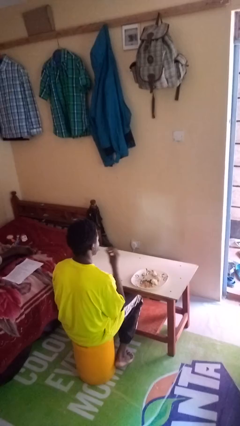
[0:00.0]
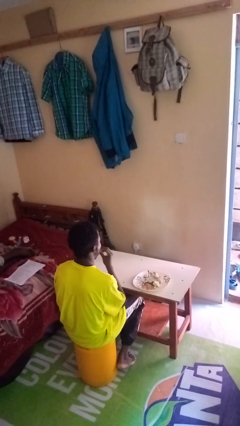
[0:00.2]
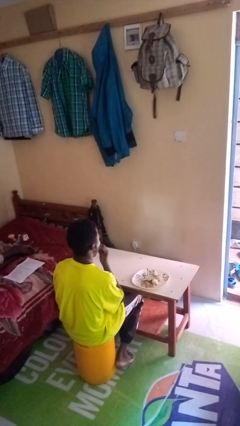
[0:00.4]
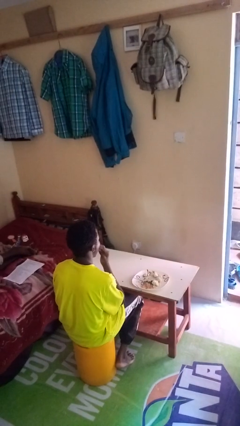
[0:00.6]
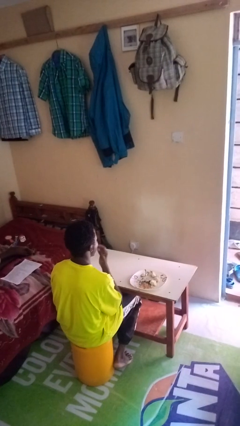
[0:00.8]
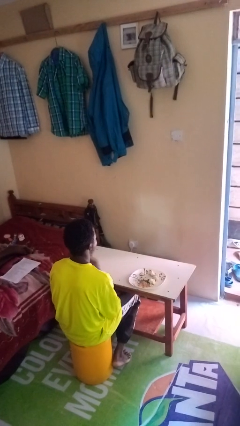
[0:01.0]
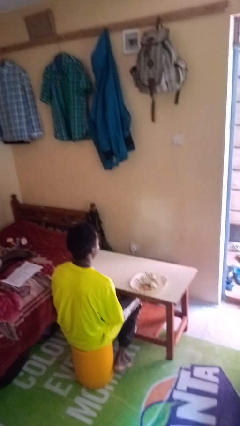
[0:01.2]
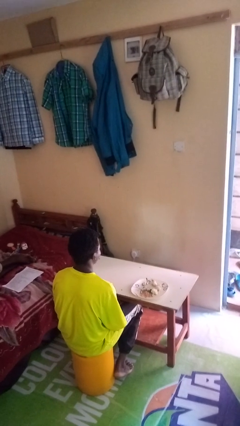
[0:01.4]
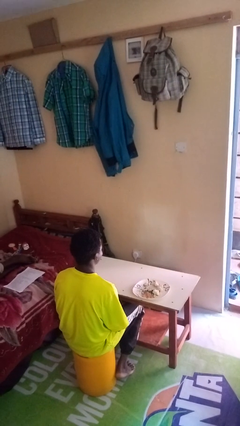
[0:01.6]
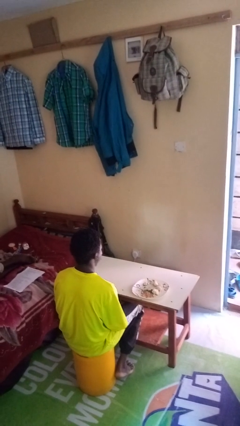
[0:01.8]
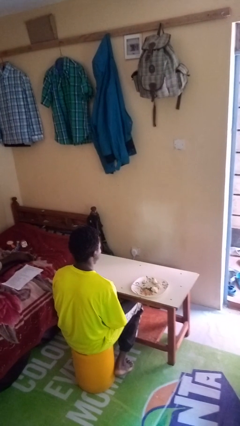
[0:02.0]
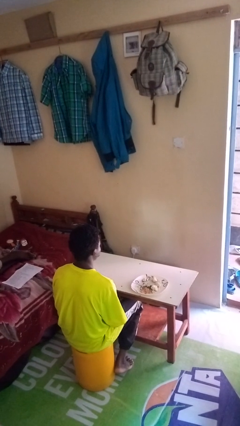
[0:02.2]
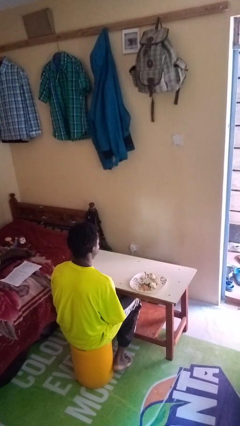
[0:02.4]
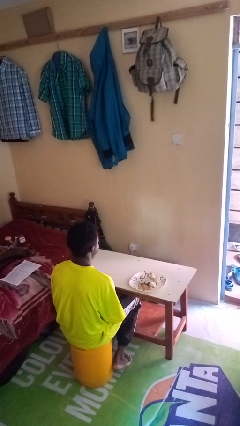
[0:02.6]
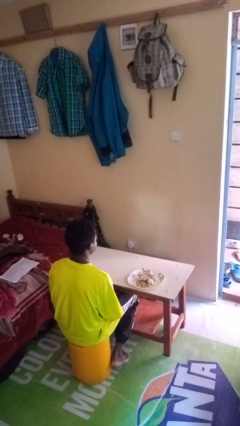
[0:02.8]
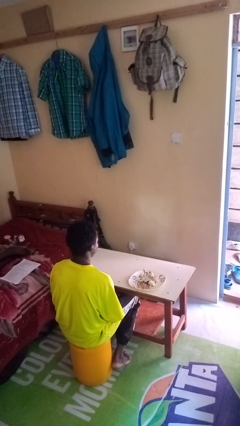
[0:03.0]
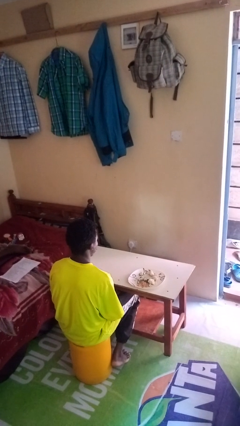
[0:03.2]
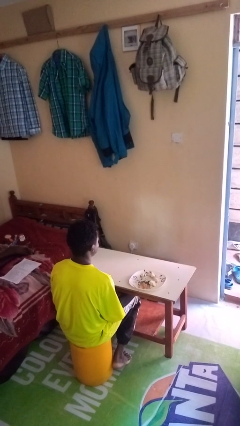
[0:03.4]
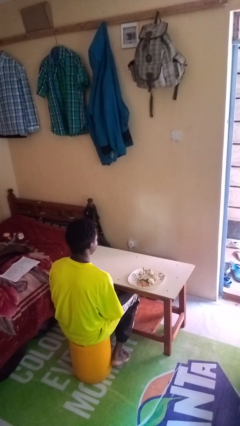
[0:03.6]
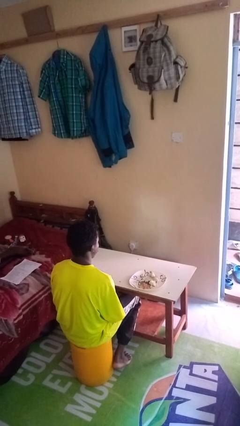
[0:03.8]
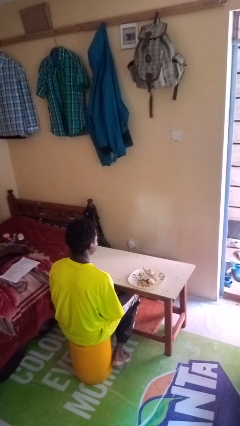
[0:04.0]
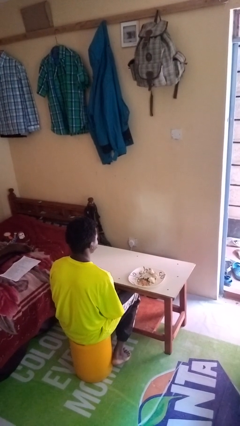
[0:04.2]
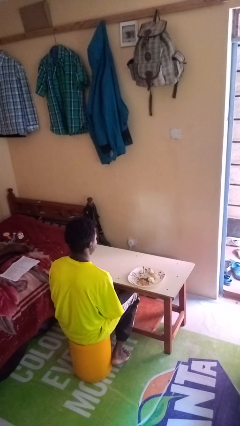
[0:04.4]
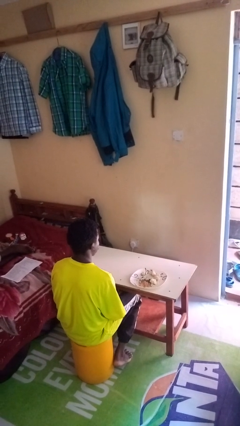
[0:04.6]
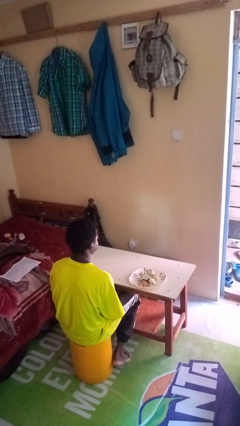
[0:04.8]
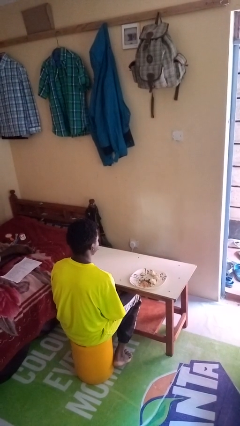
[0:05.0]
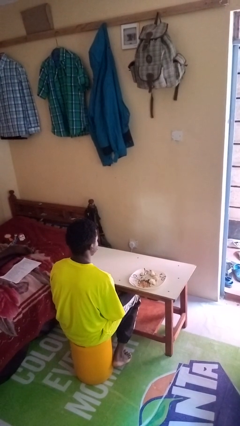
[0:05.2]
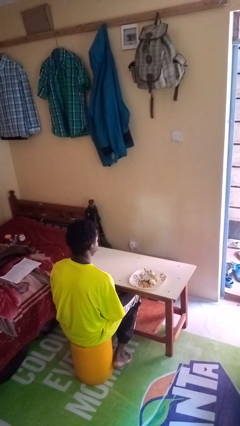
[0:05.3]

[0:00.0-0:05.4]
person eats with hands

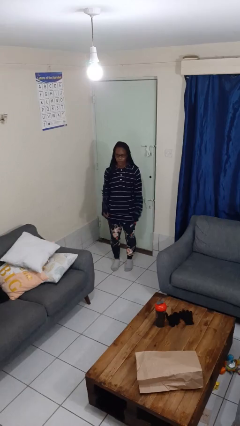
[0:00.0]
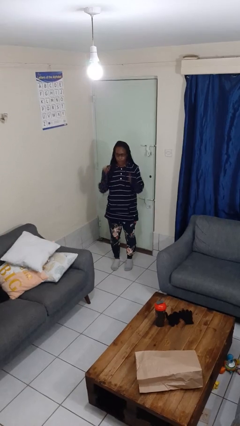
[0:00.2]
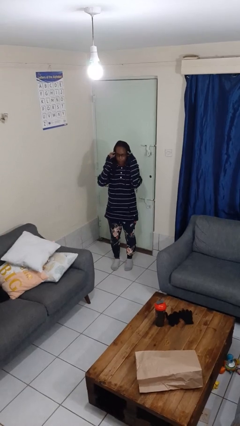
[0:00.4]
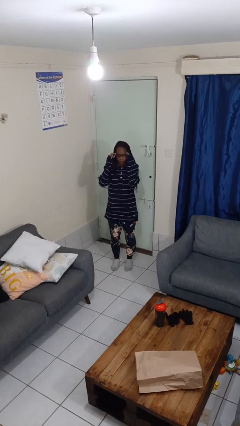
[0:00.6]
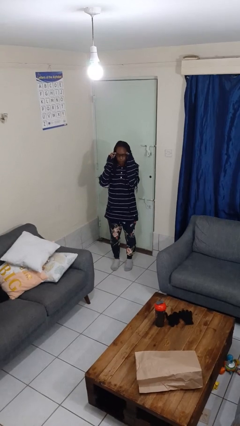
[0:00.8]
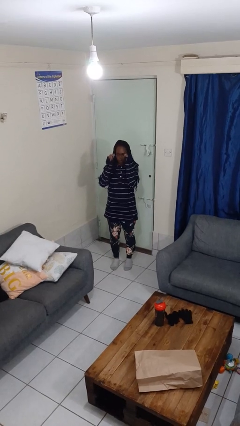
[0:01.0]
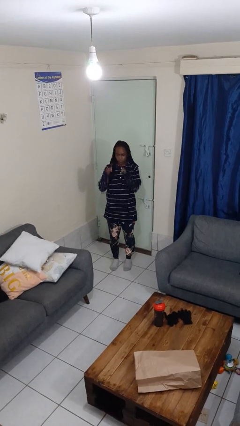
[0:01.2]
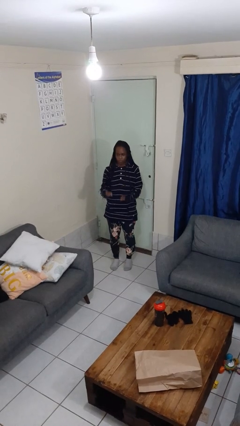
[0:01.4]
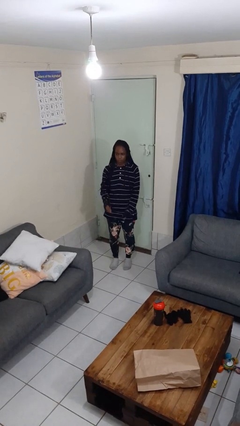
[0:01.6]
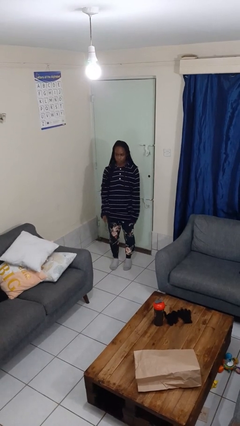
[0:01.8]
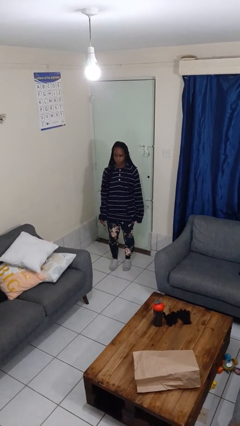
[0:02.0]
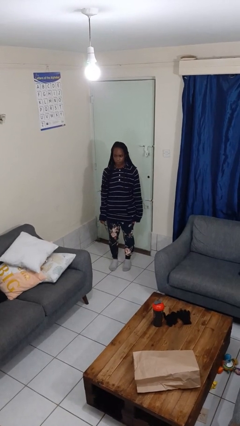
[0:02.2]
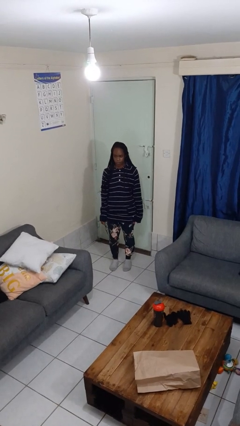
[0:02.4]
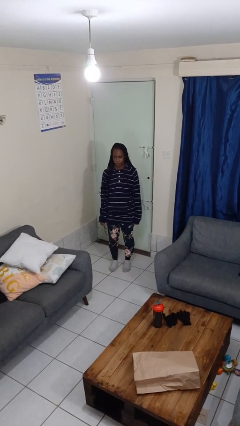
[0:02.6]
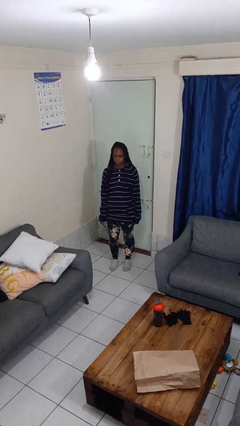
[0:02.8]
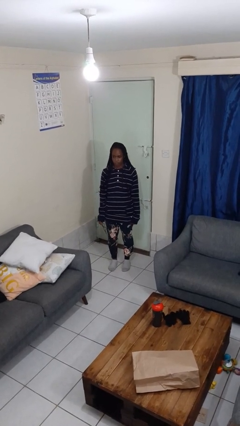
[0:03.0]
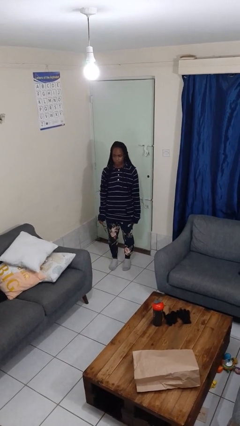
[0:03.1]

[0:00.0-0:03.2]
person takes off glasses

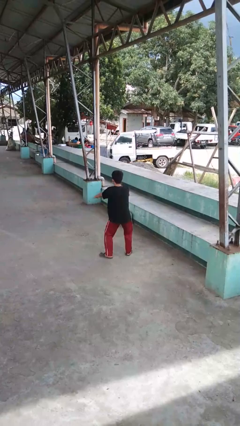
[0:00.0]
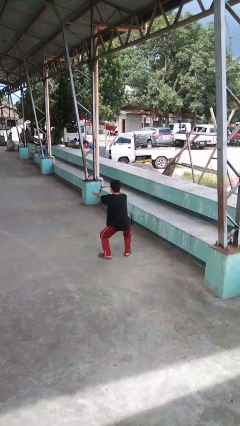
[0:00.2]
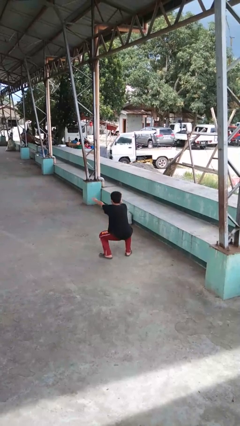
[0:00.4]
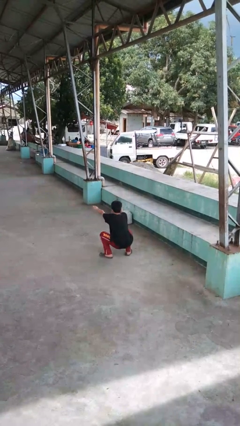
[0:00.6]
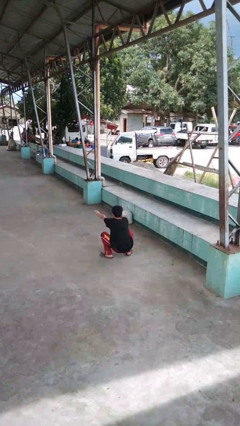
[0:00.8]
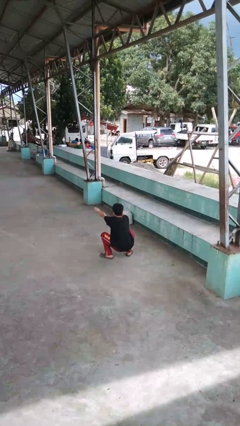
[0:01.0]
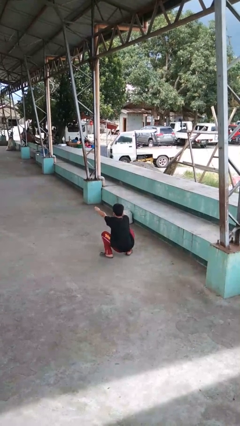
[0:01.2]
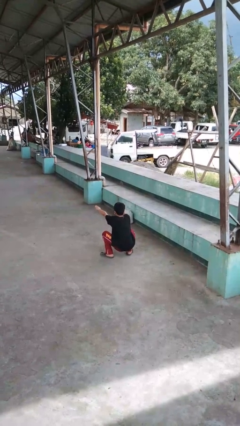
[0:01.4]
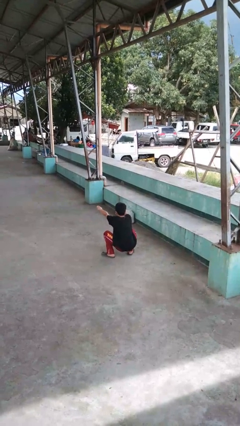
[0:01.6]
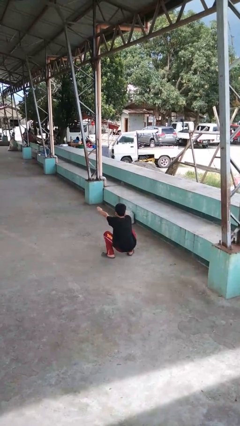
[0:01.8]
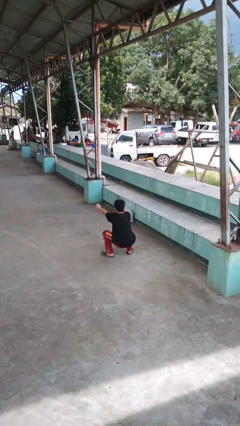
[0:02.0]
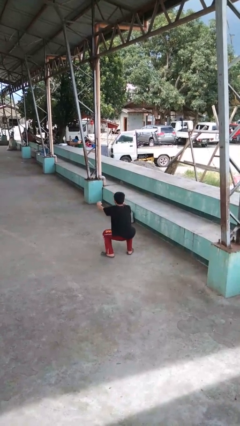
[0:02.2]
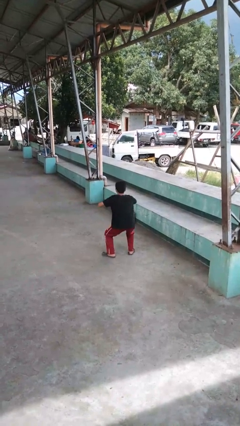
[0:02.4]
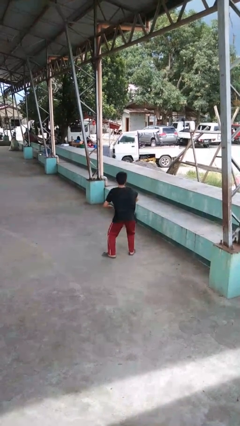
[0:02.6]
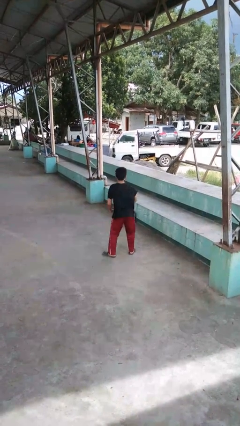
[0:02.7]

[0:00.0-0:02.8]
person squats

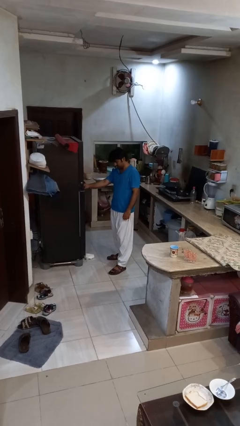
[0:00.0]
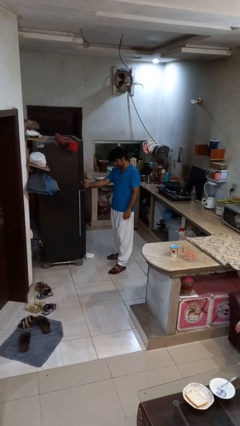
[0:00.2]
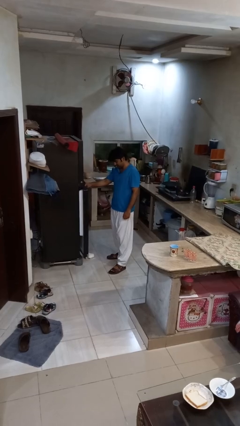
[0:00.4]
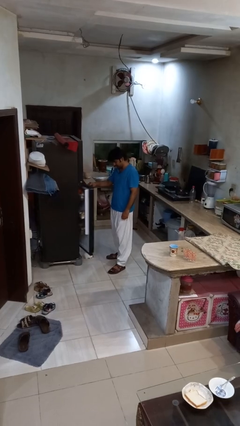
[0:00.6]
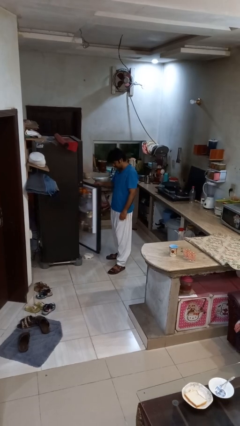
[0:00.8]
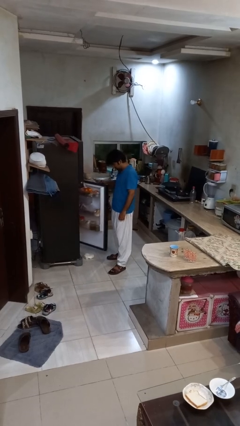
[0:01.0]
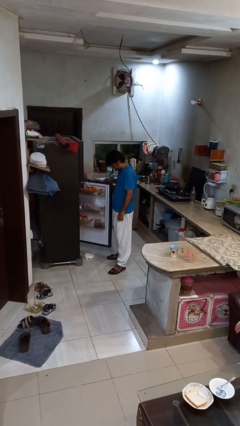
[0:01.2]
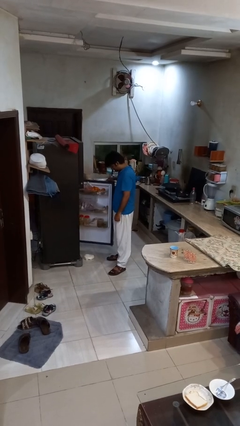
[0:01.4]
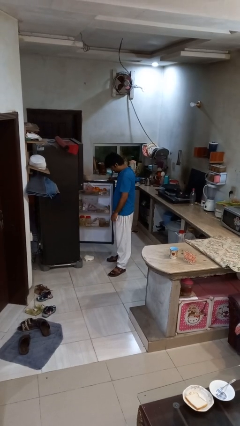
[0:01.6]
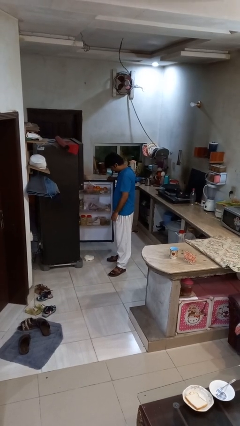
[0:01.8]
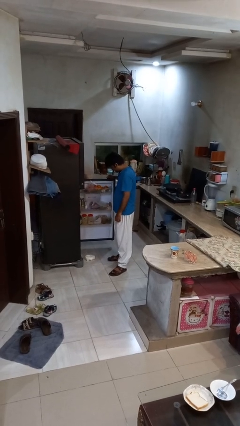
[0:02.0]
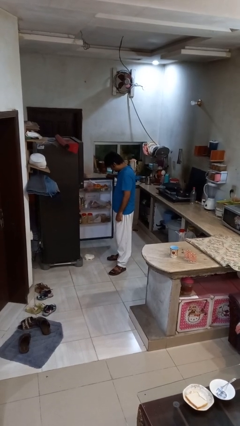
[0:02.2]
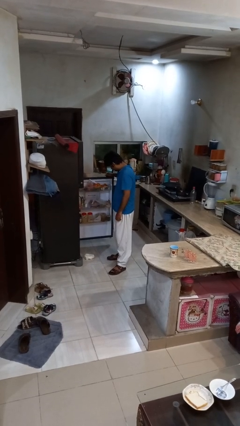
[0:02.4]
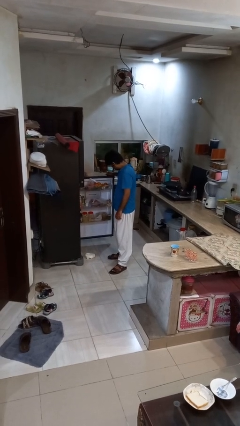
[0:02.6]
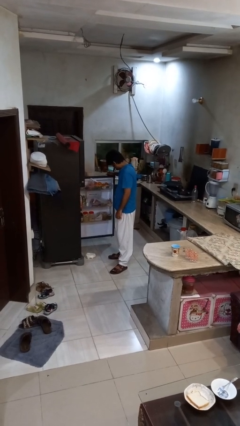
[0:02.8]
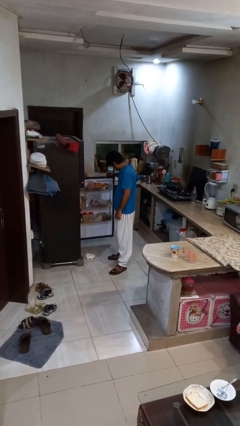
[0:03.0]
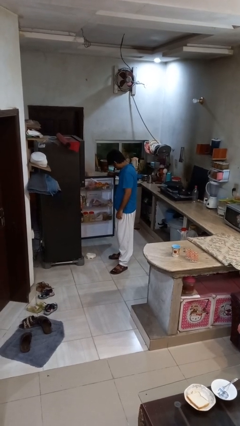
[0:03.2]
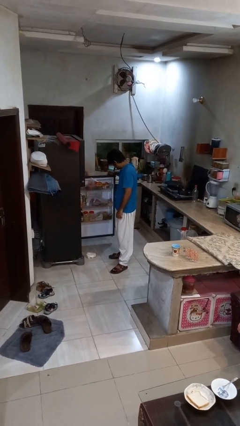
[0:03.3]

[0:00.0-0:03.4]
person opens refrigerator

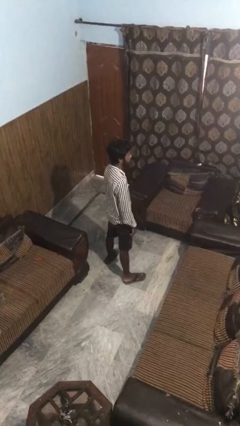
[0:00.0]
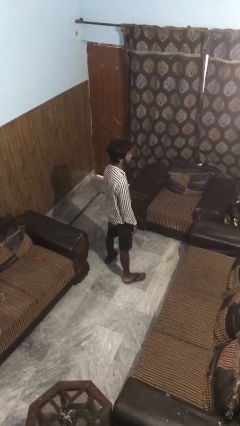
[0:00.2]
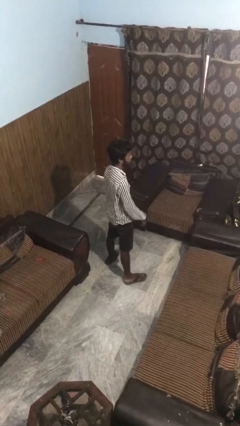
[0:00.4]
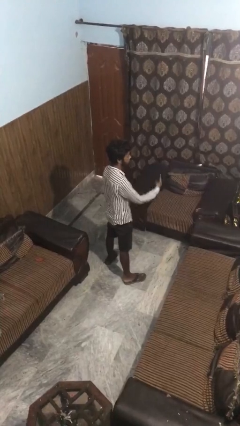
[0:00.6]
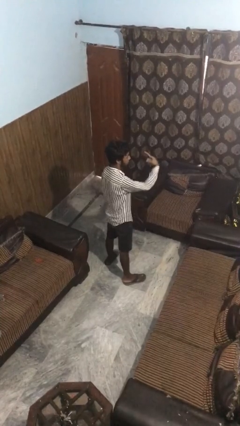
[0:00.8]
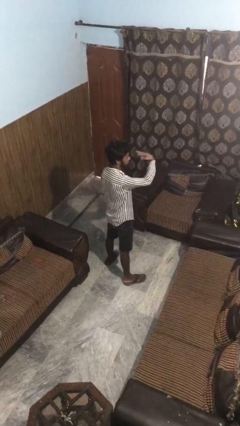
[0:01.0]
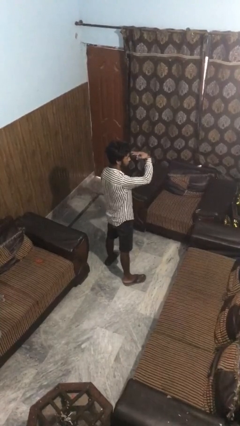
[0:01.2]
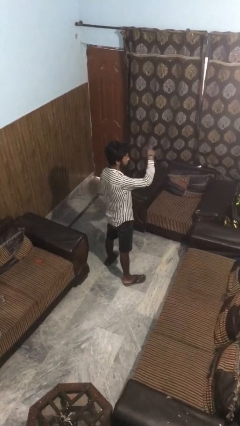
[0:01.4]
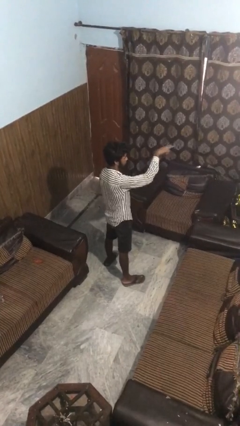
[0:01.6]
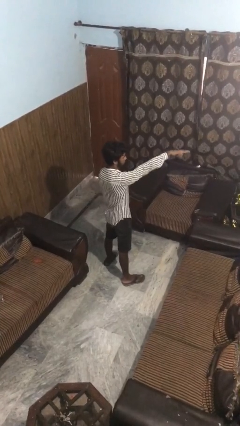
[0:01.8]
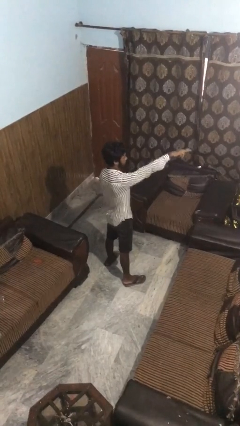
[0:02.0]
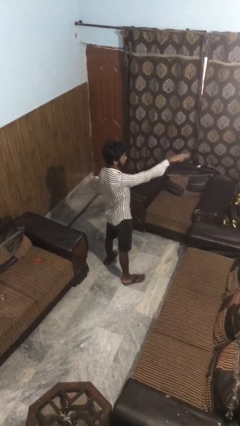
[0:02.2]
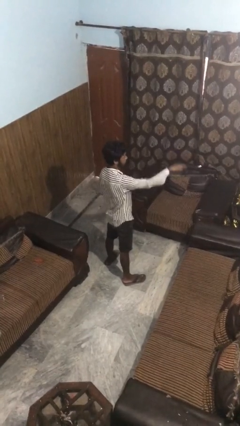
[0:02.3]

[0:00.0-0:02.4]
person gestures watch closely
